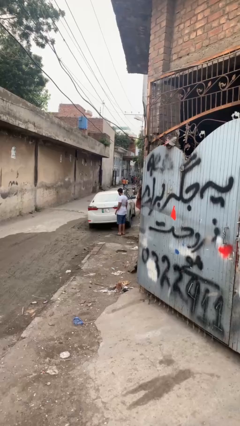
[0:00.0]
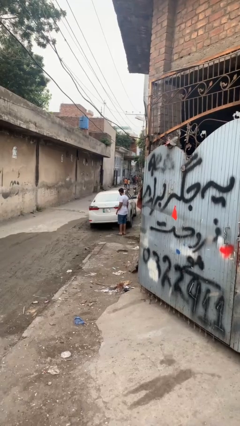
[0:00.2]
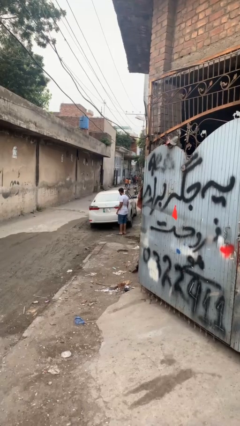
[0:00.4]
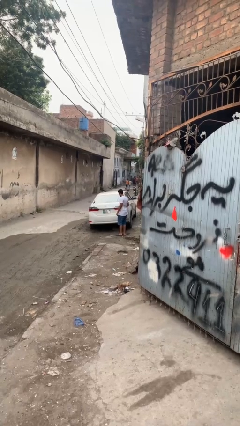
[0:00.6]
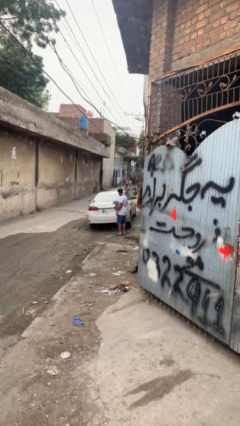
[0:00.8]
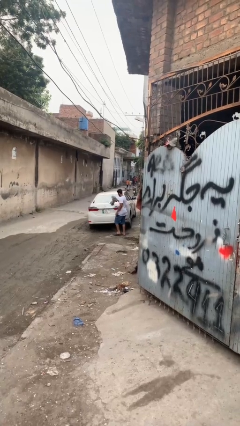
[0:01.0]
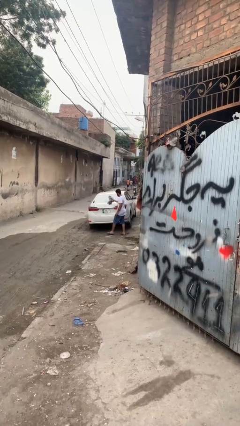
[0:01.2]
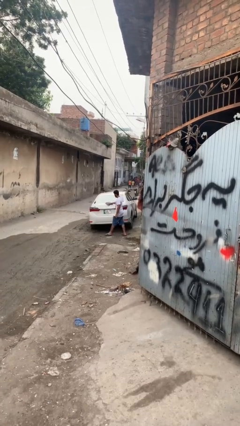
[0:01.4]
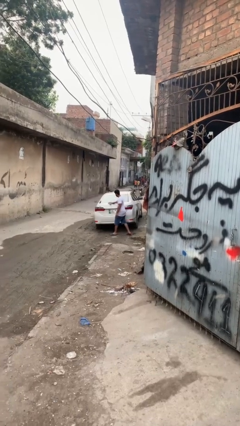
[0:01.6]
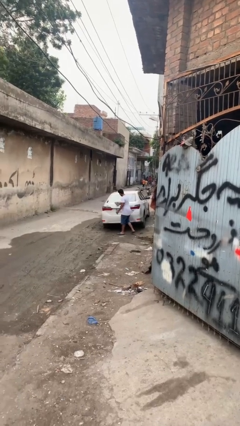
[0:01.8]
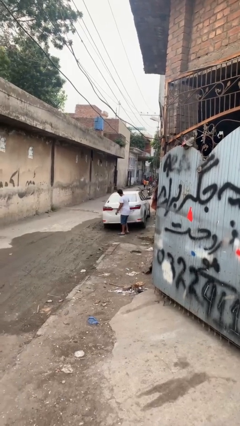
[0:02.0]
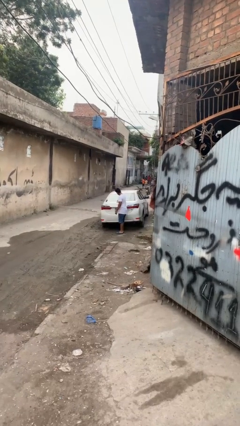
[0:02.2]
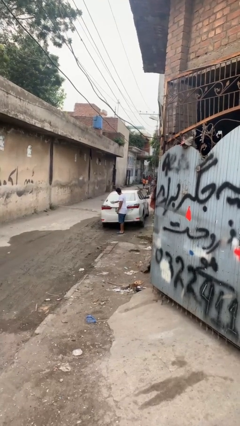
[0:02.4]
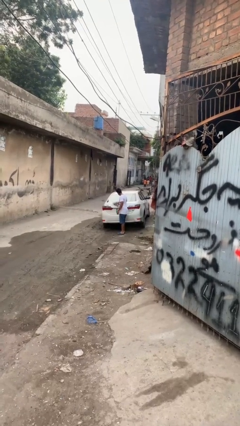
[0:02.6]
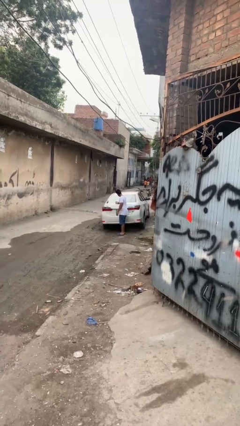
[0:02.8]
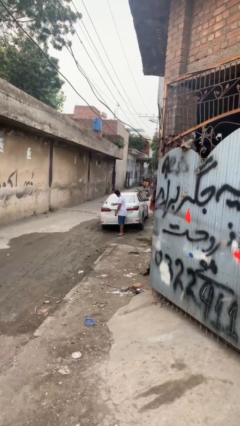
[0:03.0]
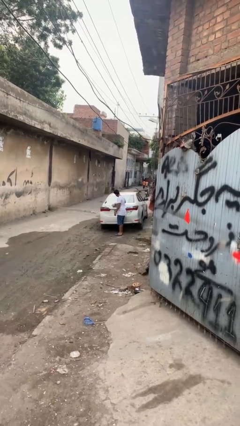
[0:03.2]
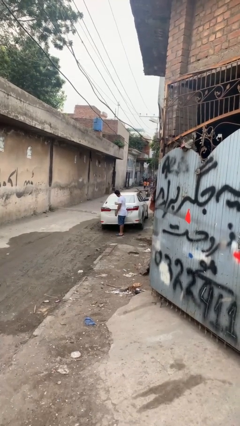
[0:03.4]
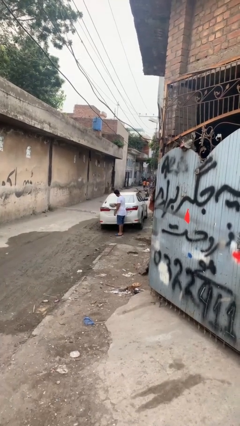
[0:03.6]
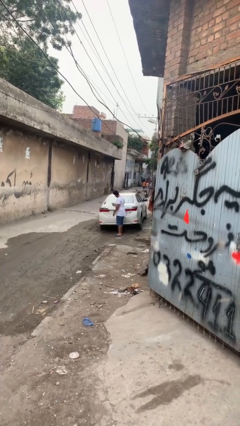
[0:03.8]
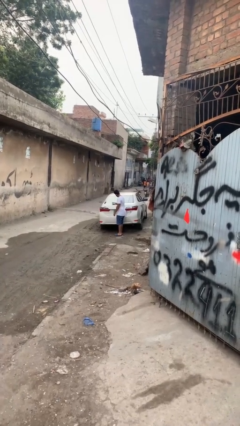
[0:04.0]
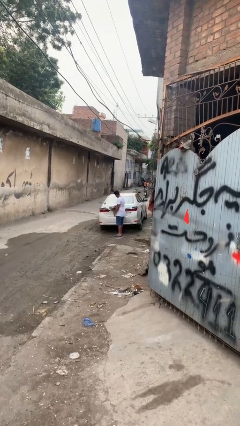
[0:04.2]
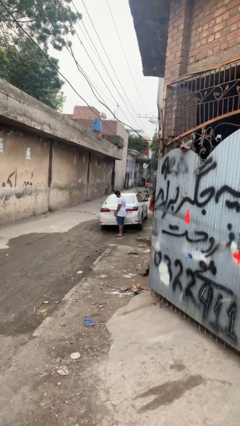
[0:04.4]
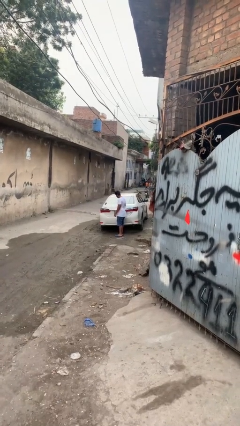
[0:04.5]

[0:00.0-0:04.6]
person polishes car with rag

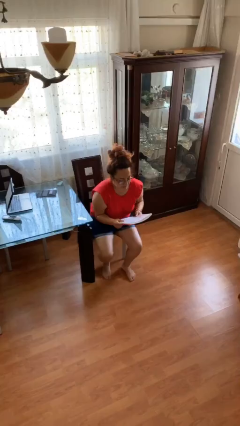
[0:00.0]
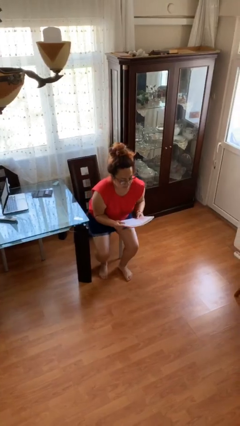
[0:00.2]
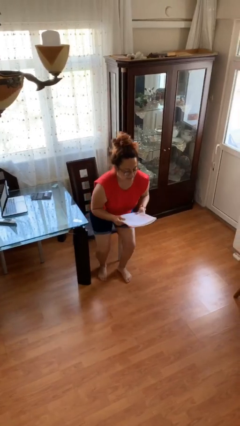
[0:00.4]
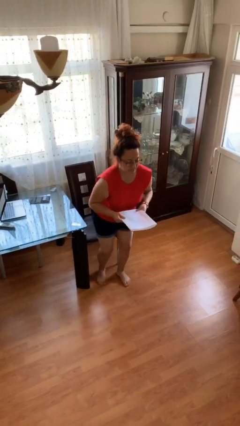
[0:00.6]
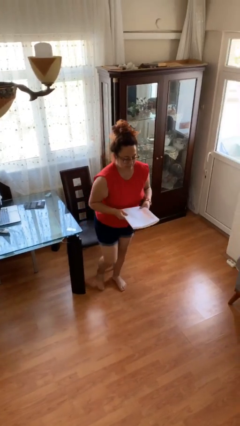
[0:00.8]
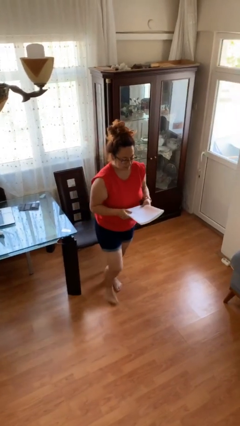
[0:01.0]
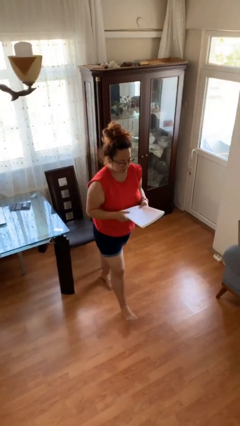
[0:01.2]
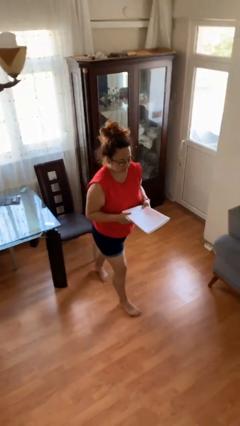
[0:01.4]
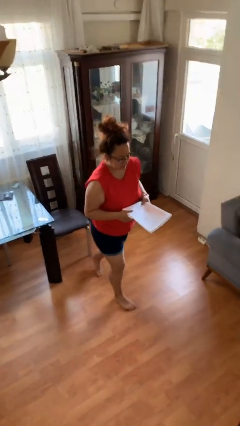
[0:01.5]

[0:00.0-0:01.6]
person stands up

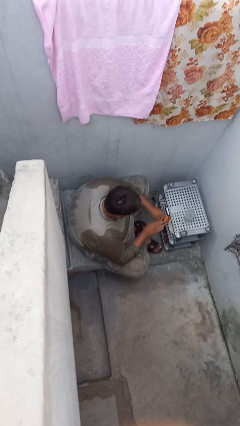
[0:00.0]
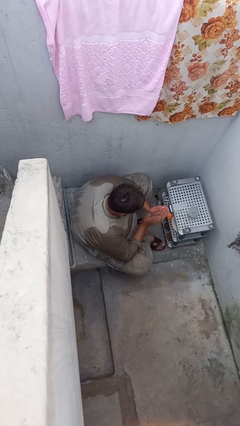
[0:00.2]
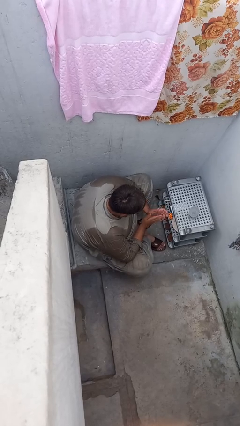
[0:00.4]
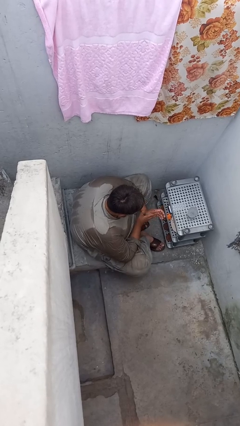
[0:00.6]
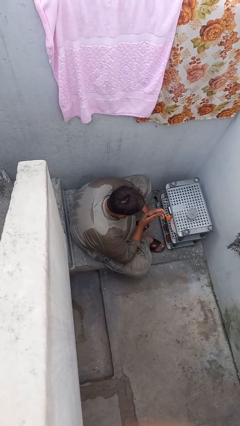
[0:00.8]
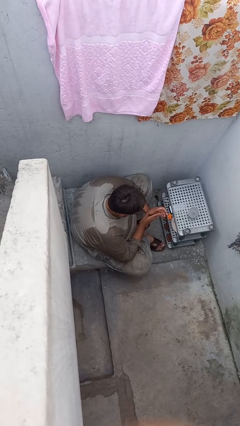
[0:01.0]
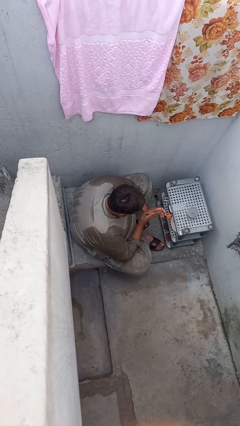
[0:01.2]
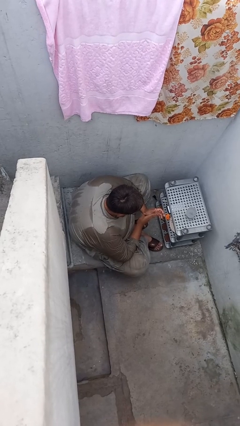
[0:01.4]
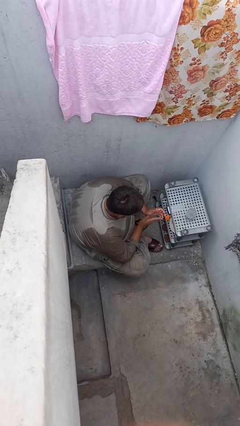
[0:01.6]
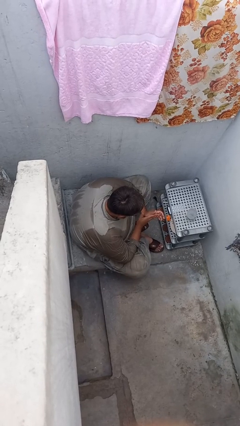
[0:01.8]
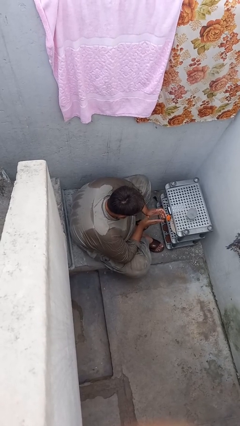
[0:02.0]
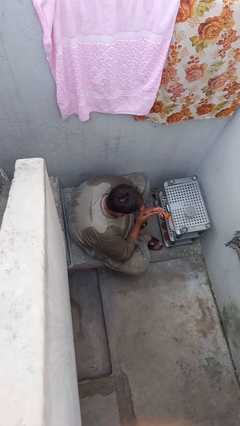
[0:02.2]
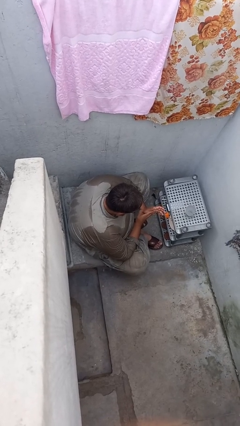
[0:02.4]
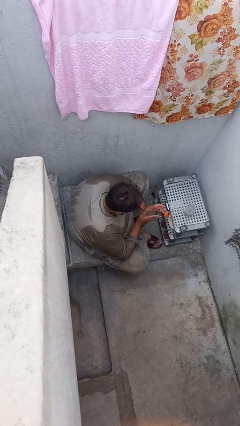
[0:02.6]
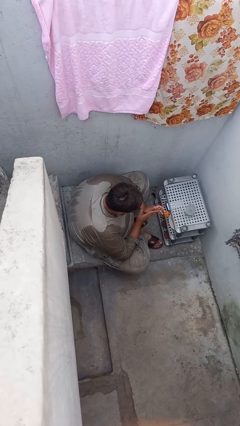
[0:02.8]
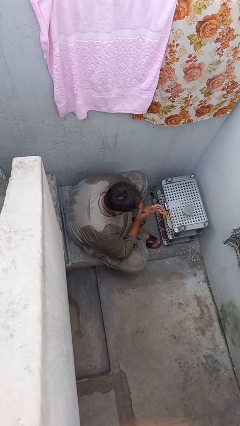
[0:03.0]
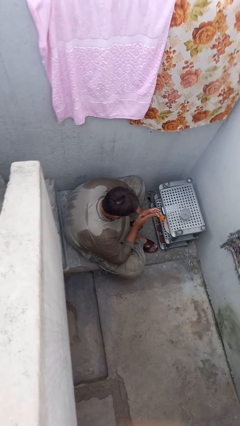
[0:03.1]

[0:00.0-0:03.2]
person claps hands

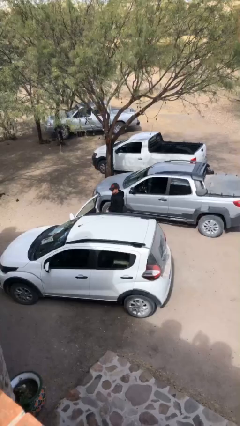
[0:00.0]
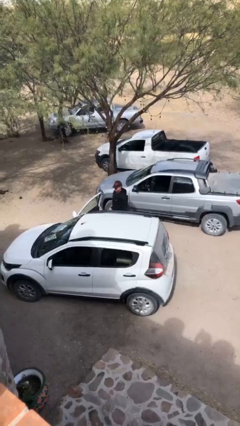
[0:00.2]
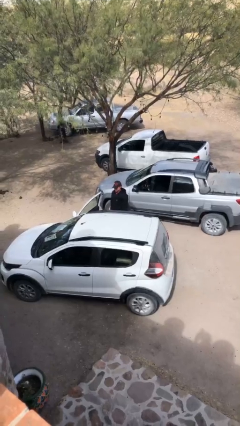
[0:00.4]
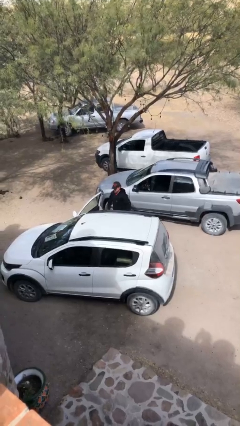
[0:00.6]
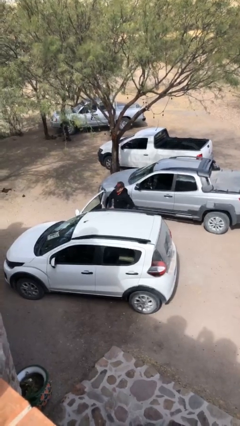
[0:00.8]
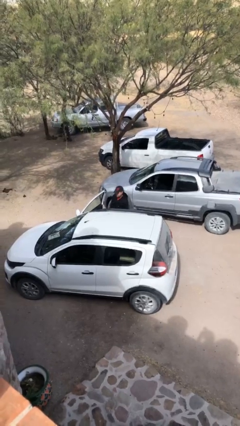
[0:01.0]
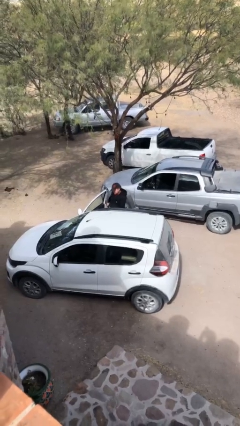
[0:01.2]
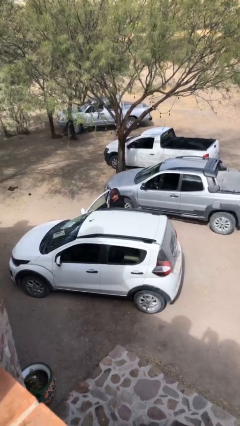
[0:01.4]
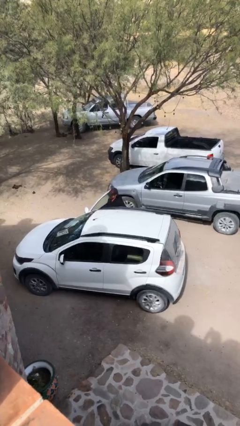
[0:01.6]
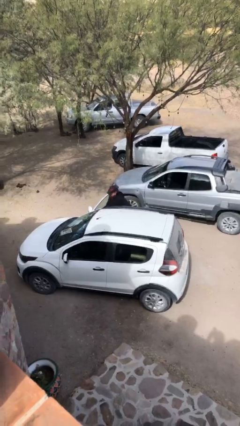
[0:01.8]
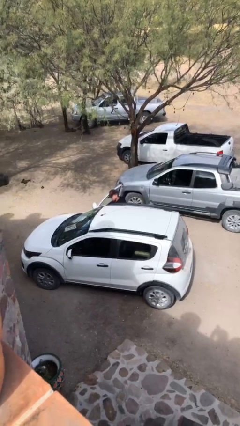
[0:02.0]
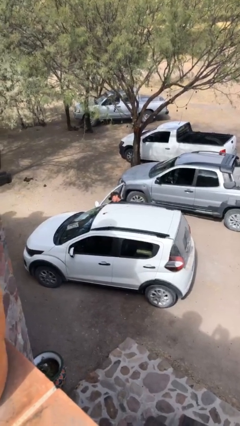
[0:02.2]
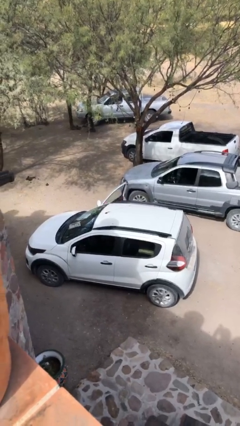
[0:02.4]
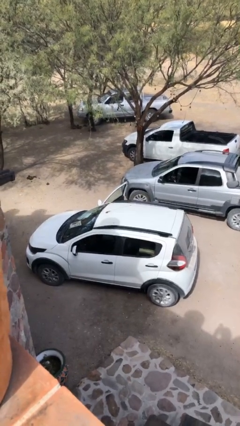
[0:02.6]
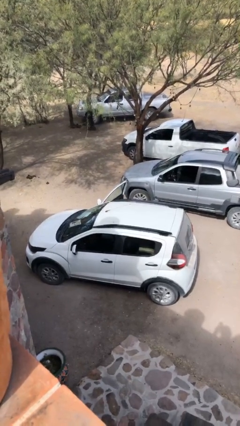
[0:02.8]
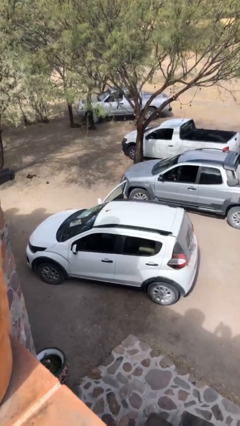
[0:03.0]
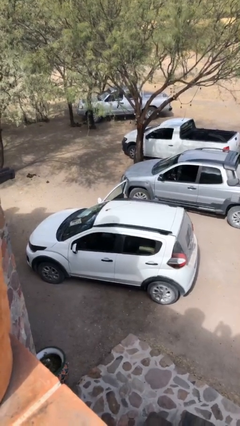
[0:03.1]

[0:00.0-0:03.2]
person enters car

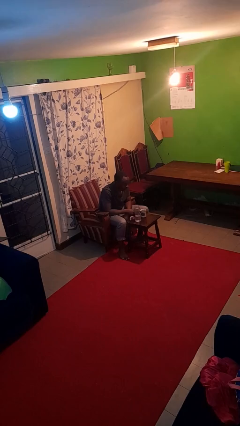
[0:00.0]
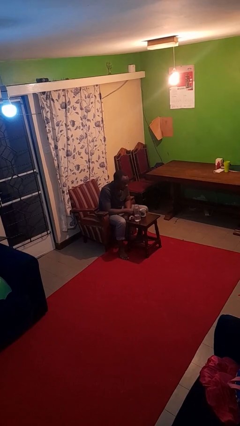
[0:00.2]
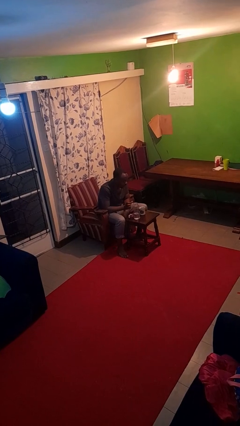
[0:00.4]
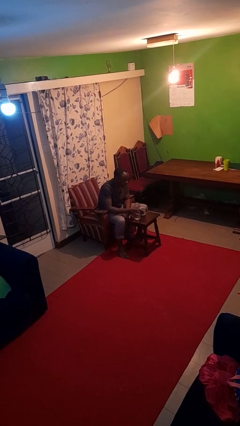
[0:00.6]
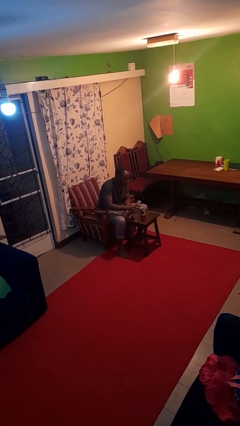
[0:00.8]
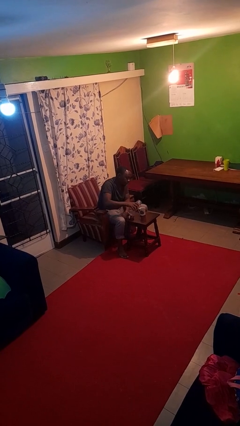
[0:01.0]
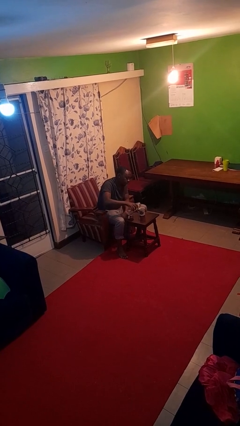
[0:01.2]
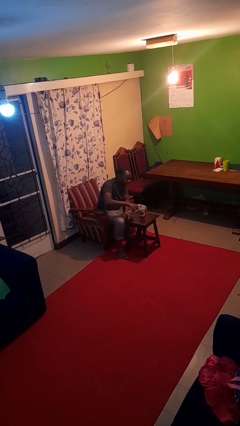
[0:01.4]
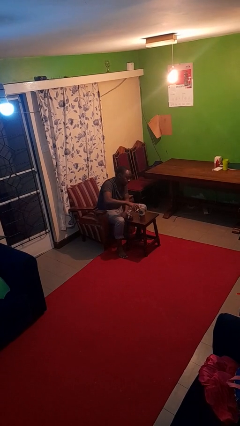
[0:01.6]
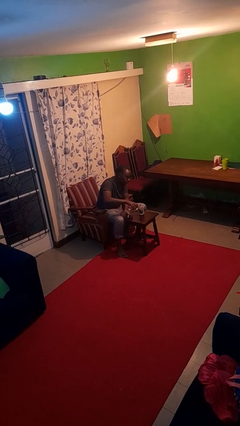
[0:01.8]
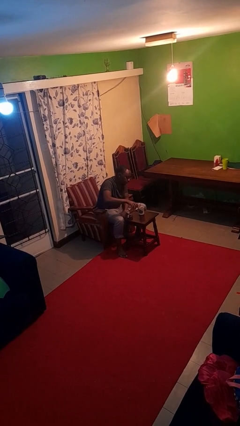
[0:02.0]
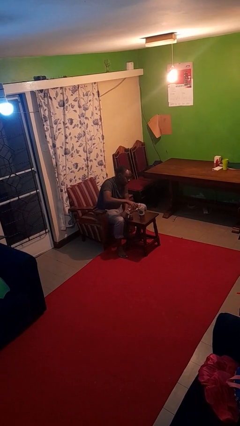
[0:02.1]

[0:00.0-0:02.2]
person pours liquid into cup

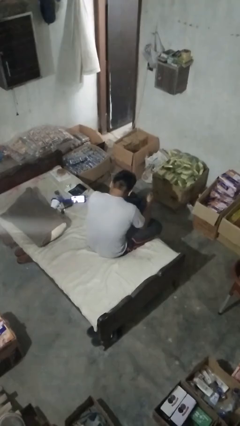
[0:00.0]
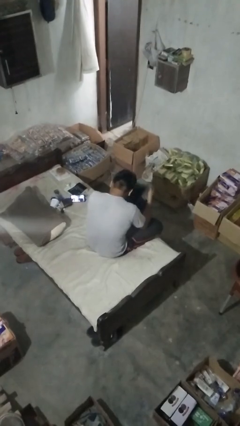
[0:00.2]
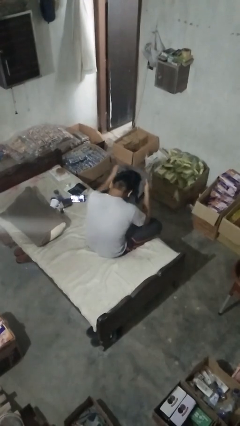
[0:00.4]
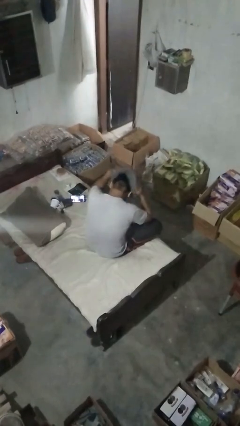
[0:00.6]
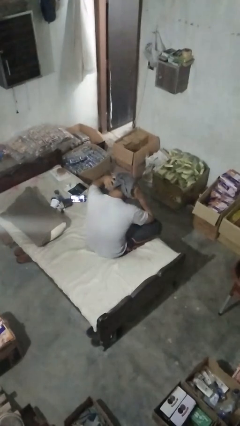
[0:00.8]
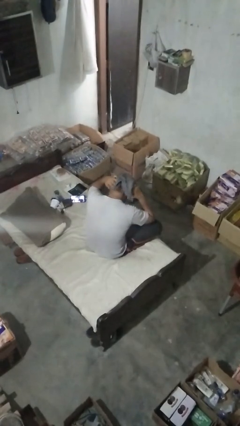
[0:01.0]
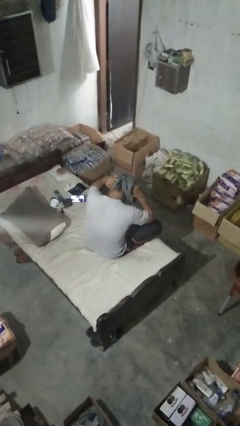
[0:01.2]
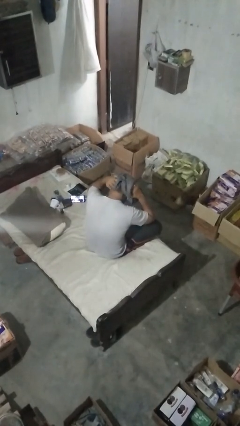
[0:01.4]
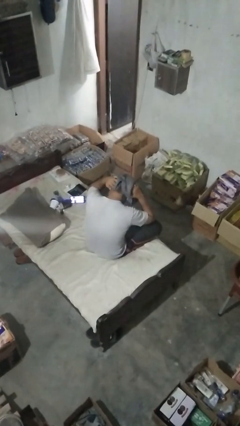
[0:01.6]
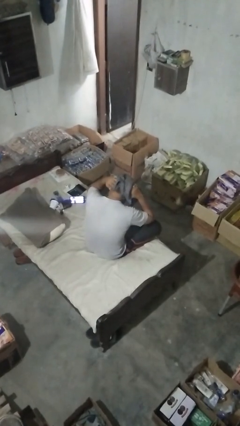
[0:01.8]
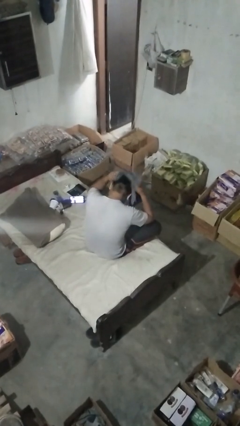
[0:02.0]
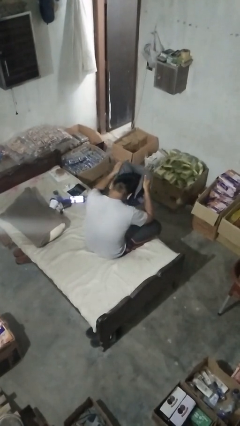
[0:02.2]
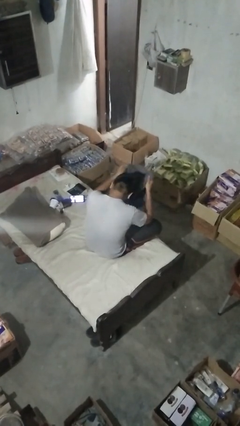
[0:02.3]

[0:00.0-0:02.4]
person dries hair with towel
